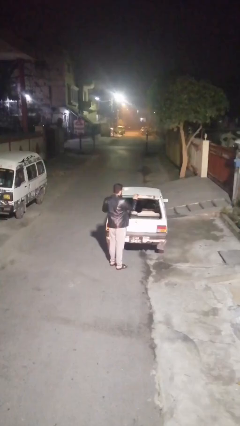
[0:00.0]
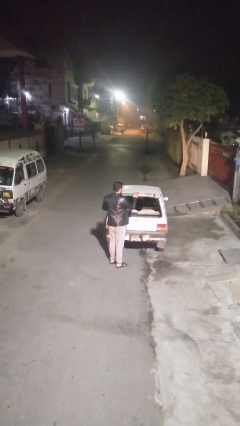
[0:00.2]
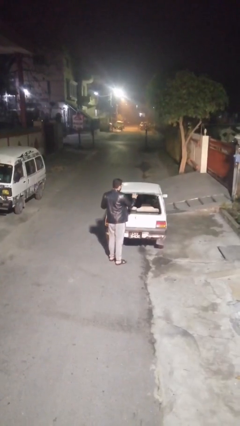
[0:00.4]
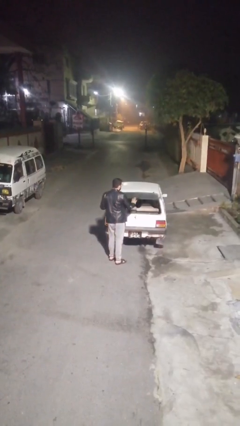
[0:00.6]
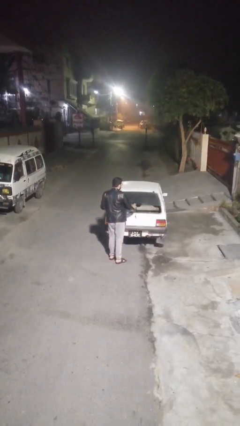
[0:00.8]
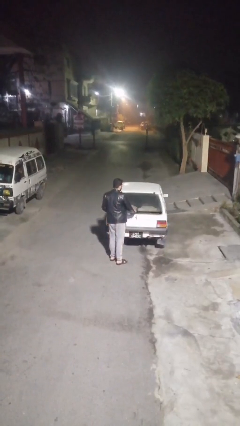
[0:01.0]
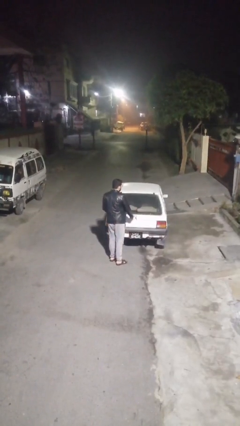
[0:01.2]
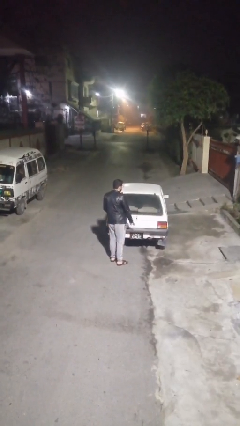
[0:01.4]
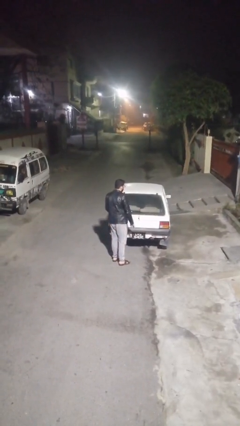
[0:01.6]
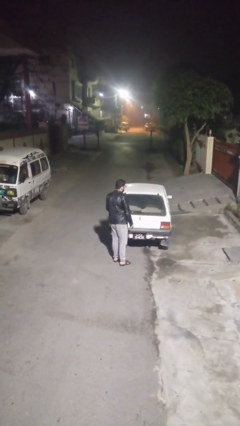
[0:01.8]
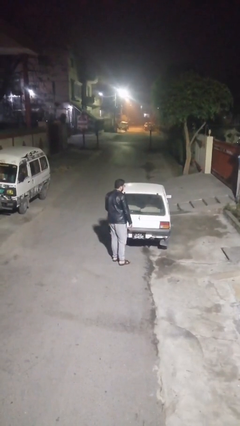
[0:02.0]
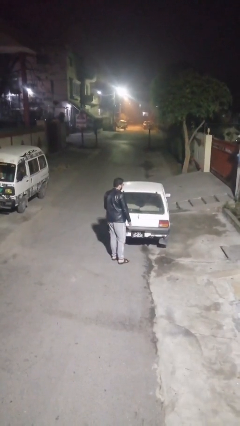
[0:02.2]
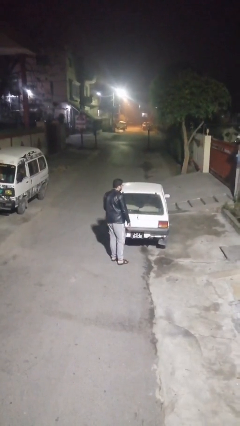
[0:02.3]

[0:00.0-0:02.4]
person closes car trunk

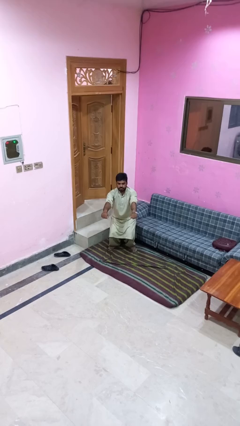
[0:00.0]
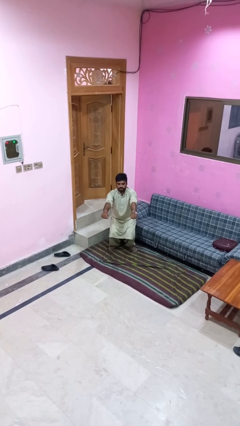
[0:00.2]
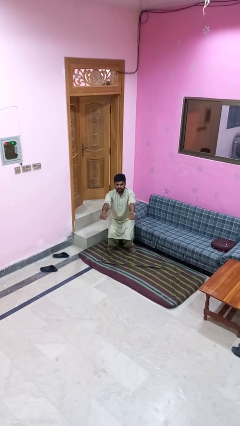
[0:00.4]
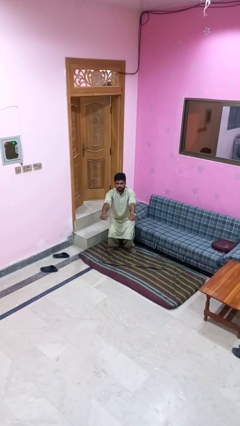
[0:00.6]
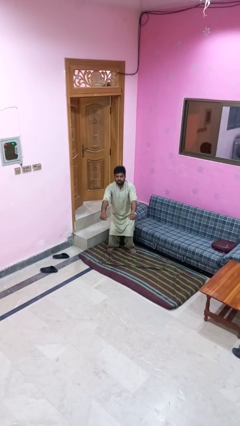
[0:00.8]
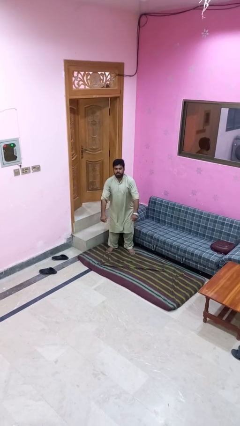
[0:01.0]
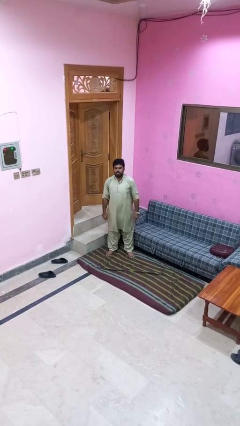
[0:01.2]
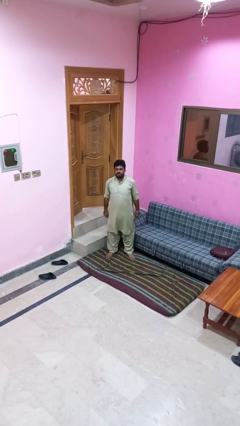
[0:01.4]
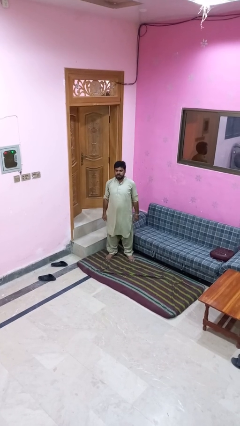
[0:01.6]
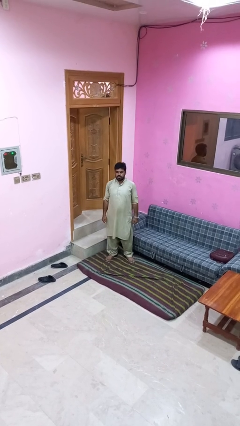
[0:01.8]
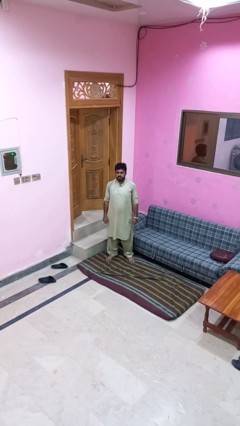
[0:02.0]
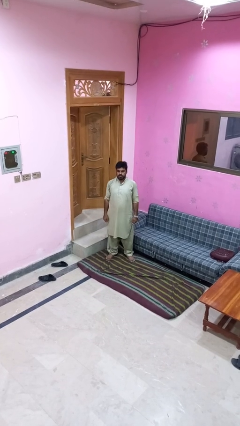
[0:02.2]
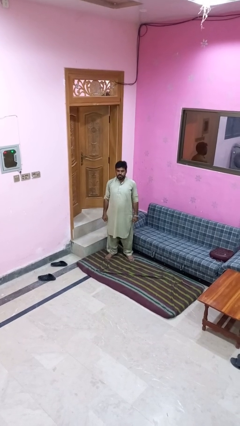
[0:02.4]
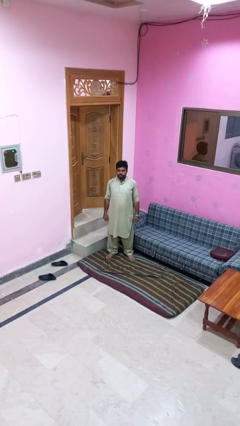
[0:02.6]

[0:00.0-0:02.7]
person stands up

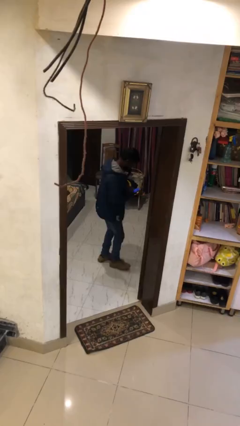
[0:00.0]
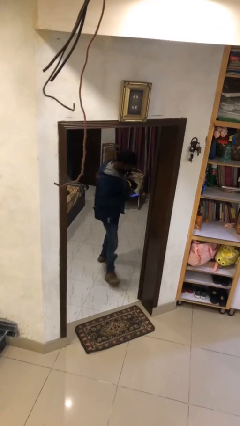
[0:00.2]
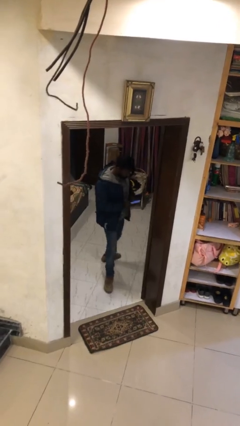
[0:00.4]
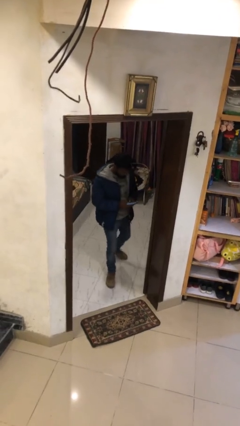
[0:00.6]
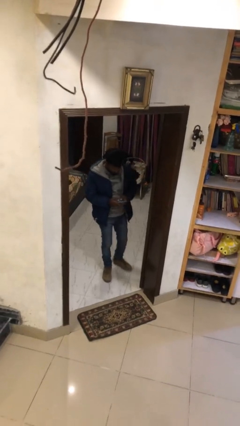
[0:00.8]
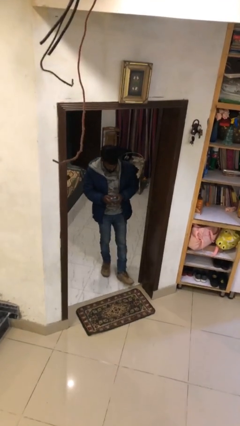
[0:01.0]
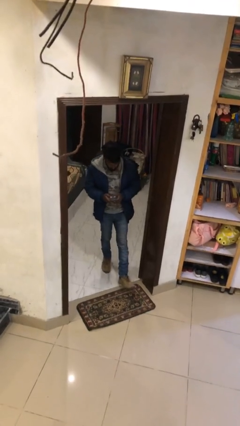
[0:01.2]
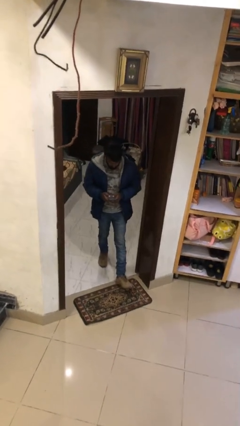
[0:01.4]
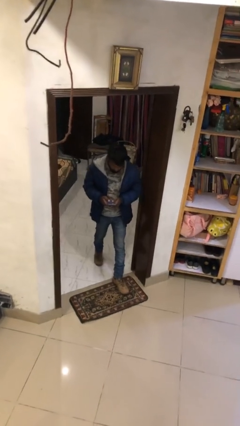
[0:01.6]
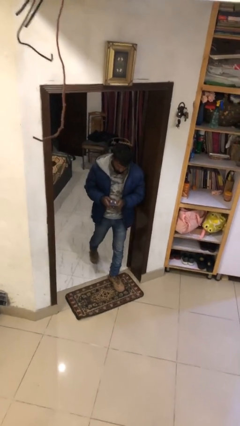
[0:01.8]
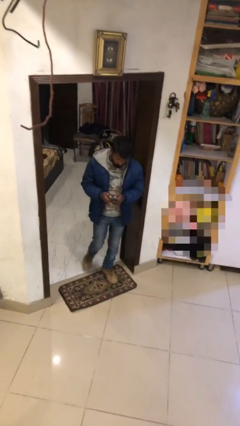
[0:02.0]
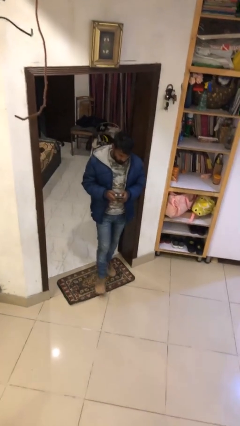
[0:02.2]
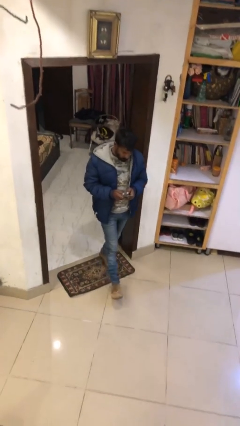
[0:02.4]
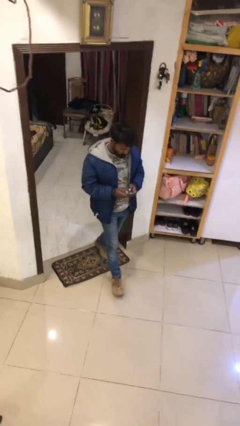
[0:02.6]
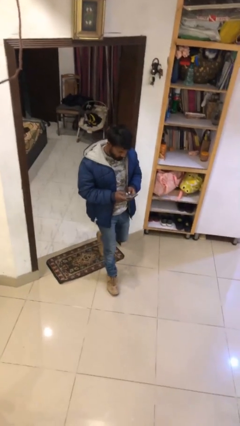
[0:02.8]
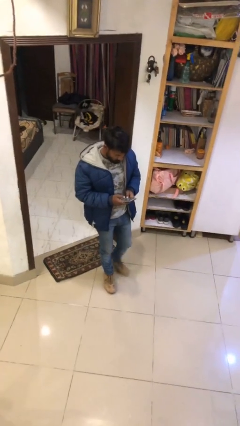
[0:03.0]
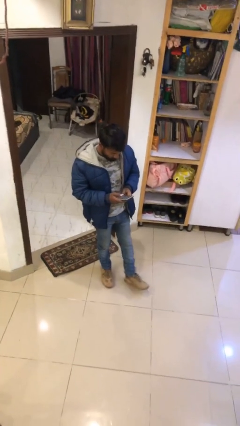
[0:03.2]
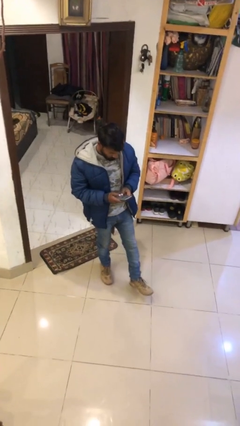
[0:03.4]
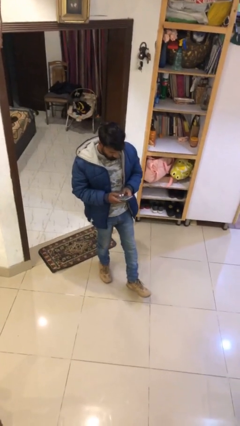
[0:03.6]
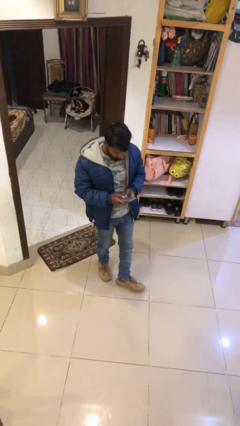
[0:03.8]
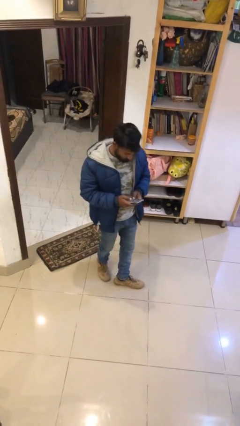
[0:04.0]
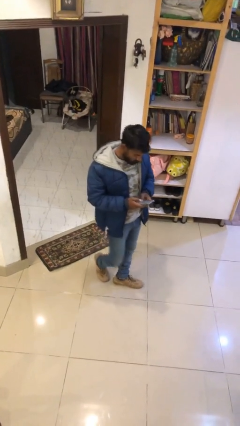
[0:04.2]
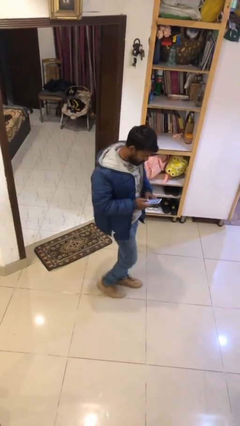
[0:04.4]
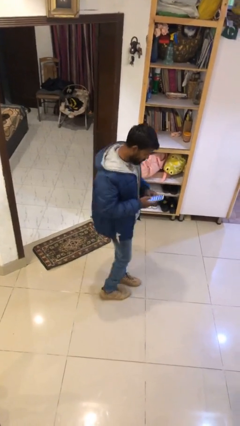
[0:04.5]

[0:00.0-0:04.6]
person enters scene through structure

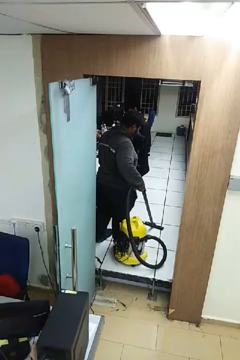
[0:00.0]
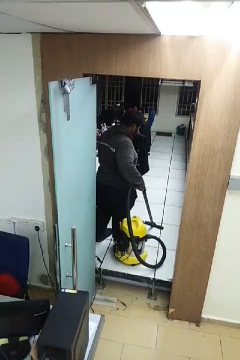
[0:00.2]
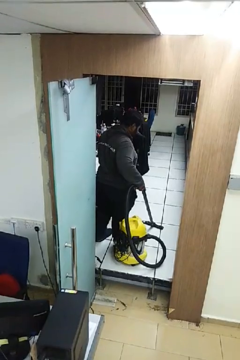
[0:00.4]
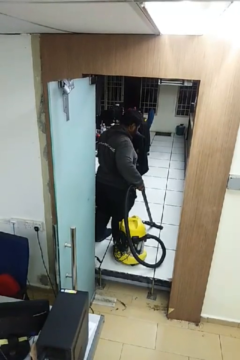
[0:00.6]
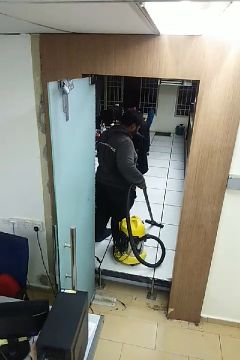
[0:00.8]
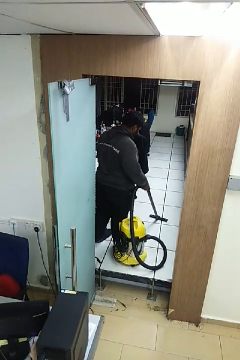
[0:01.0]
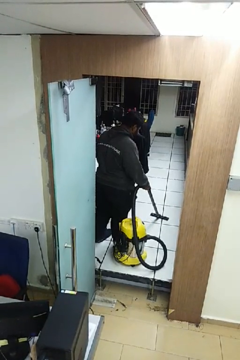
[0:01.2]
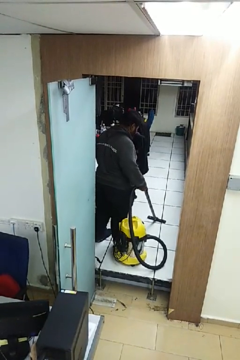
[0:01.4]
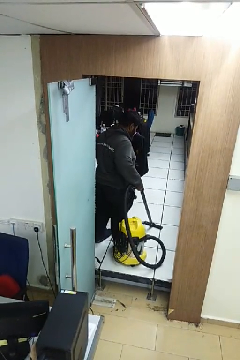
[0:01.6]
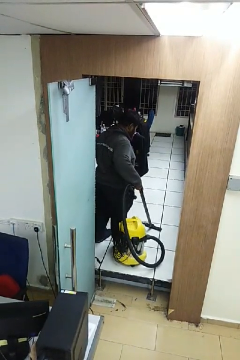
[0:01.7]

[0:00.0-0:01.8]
person vacuums carpet

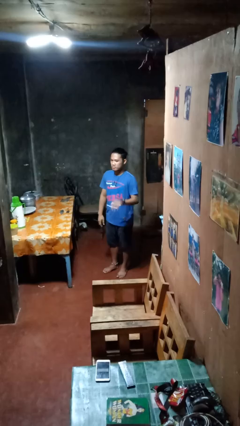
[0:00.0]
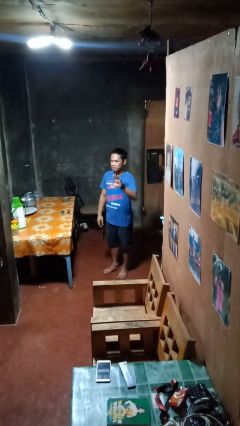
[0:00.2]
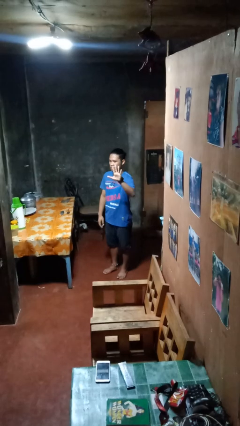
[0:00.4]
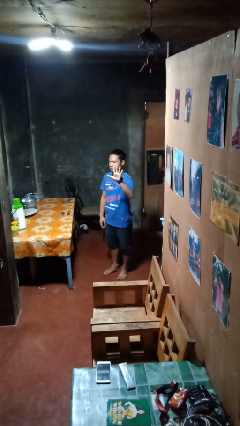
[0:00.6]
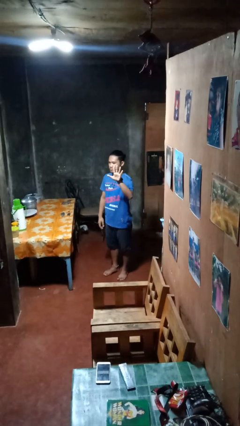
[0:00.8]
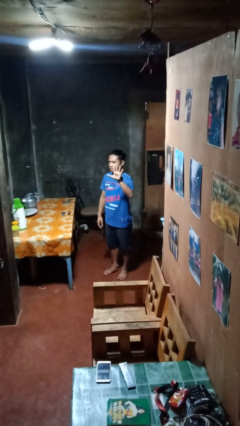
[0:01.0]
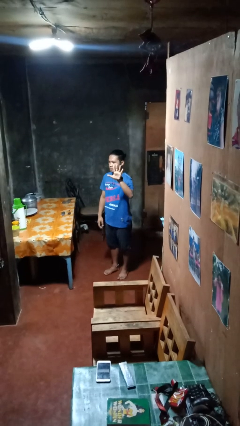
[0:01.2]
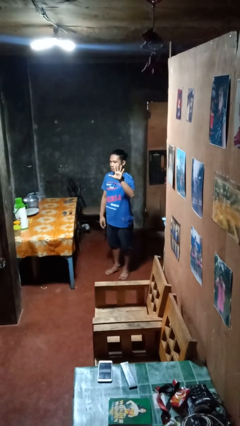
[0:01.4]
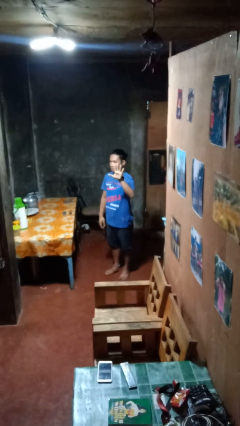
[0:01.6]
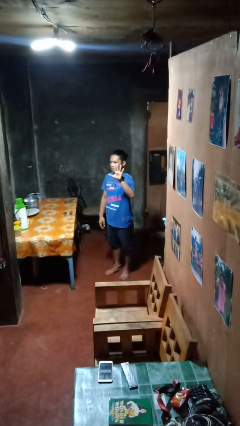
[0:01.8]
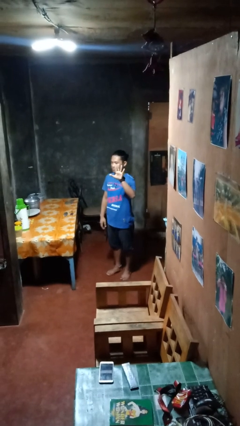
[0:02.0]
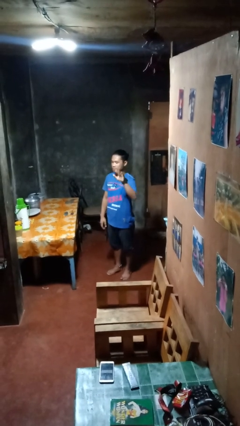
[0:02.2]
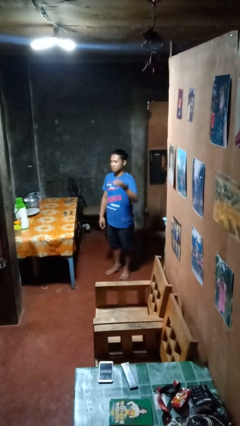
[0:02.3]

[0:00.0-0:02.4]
person gestures number five

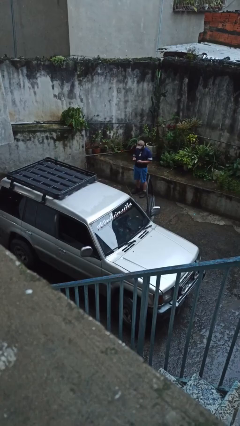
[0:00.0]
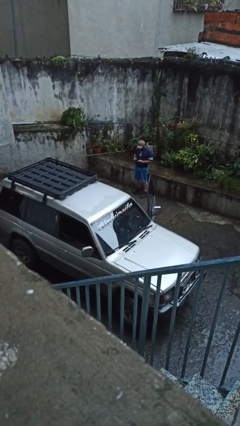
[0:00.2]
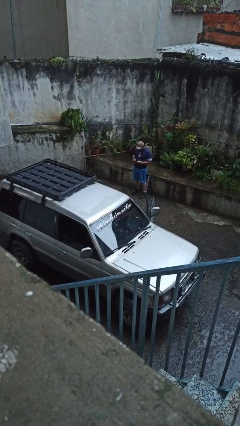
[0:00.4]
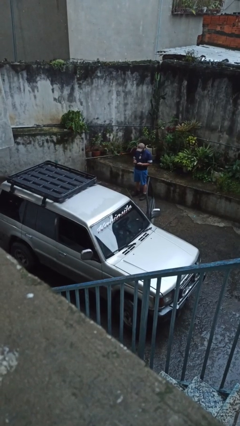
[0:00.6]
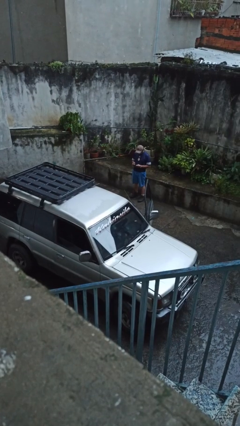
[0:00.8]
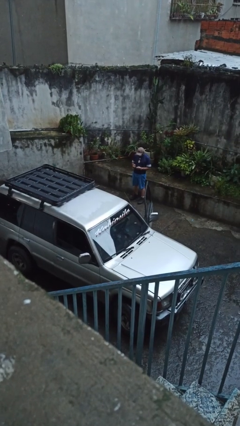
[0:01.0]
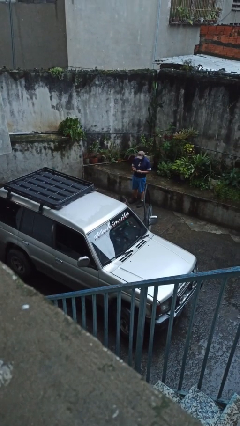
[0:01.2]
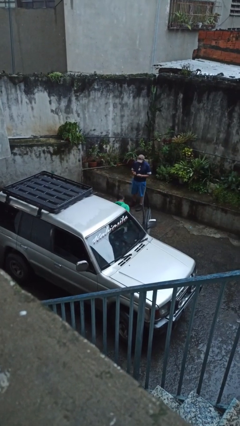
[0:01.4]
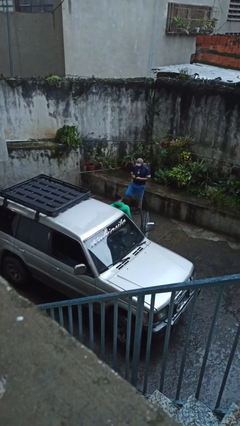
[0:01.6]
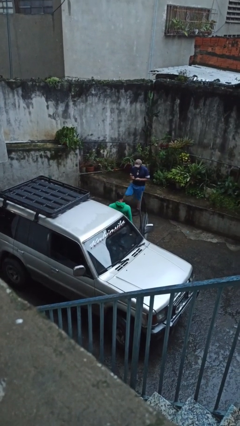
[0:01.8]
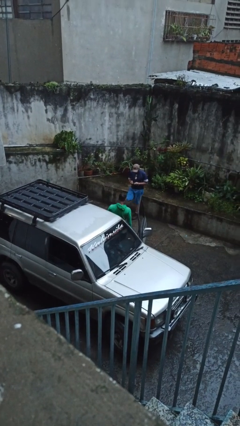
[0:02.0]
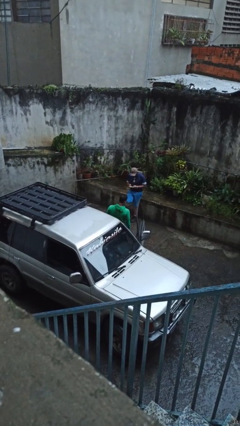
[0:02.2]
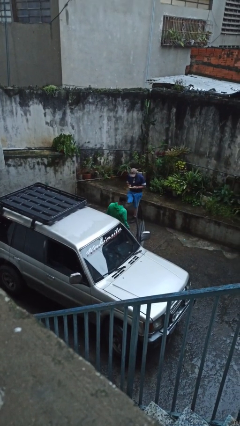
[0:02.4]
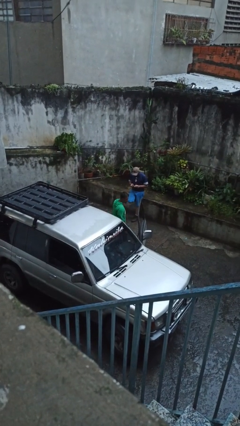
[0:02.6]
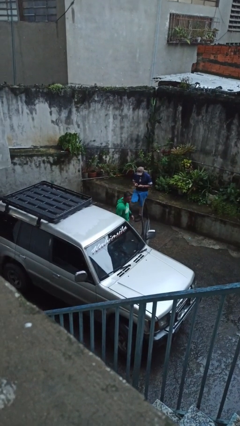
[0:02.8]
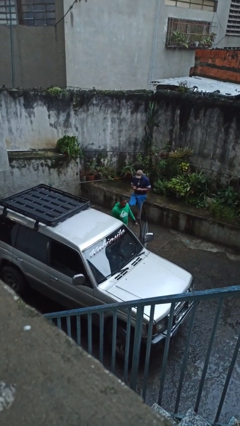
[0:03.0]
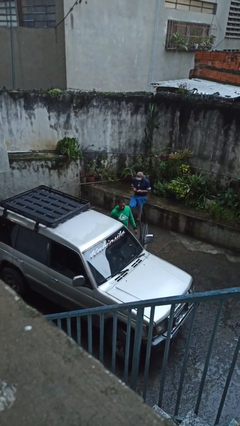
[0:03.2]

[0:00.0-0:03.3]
person exits car

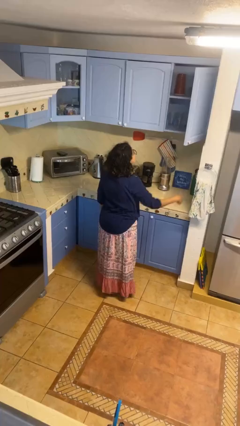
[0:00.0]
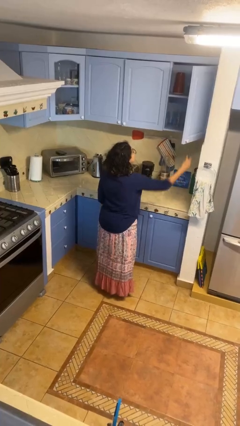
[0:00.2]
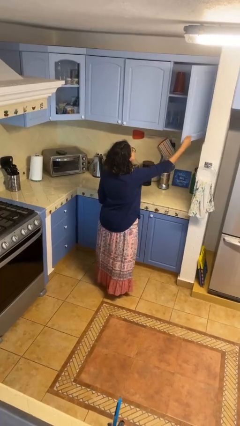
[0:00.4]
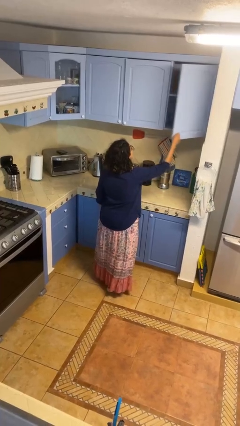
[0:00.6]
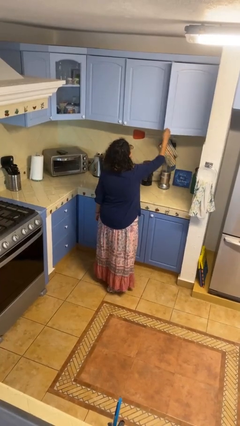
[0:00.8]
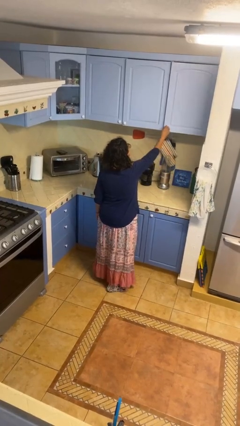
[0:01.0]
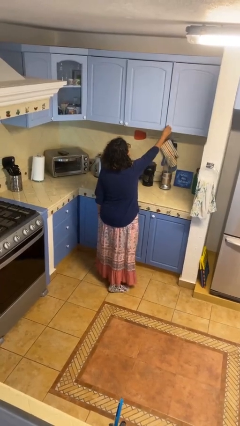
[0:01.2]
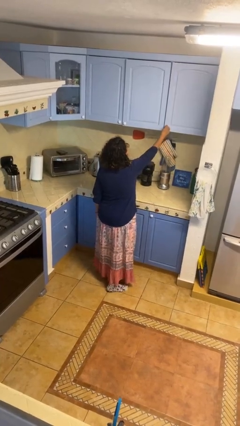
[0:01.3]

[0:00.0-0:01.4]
person closes cabinet
